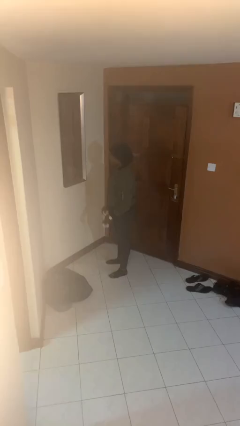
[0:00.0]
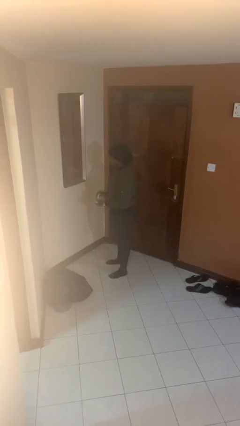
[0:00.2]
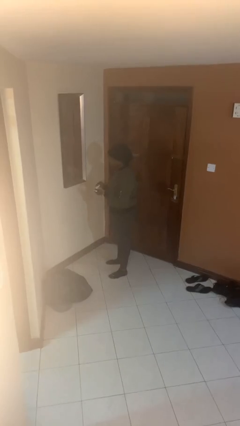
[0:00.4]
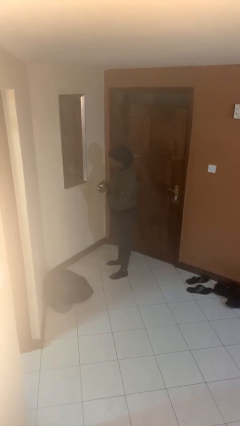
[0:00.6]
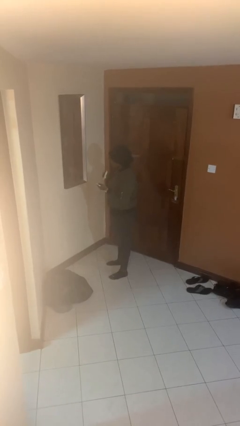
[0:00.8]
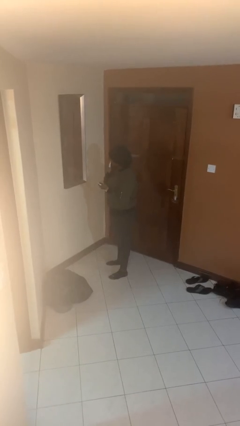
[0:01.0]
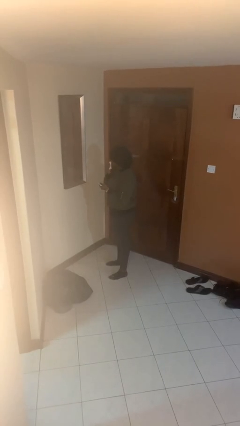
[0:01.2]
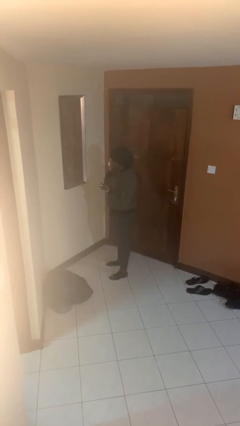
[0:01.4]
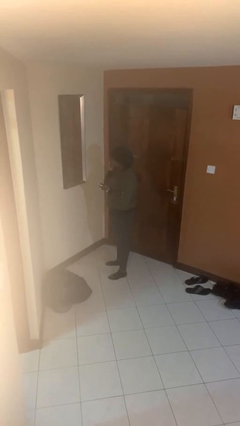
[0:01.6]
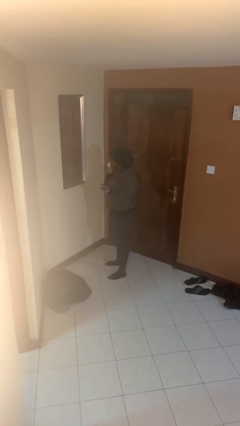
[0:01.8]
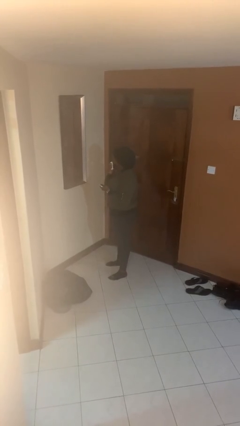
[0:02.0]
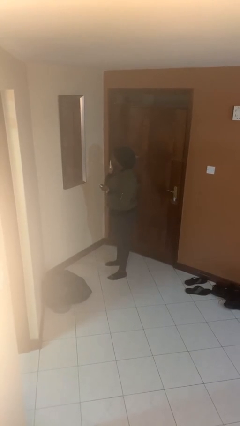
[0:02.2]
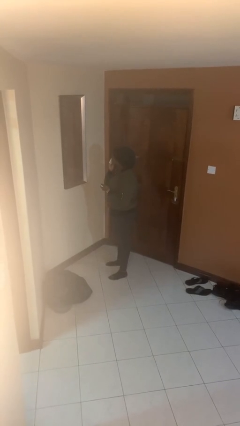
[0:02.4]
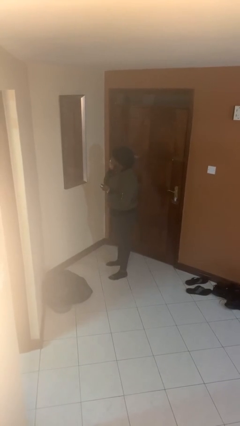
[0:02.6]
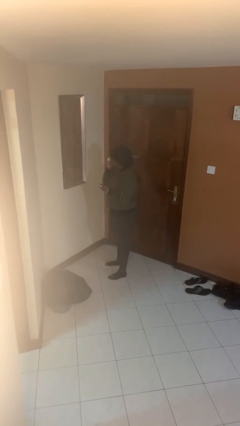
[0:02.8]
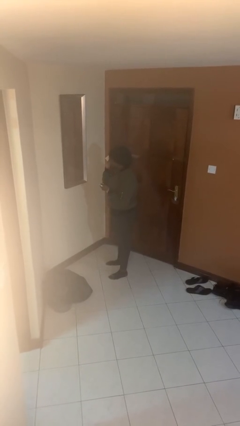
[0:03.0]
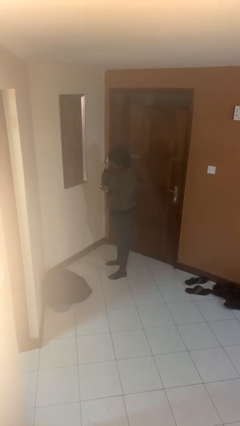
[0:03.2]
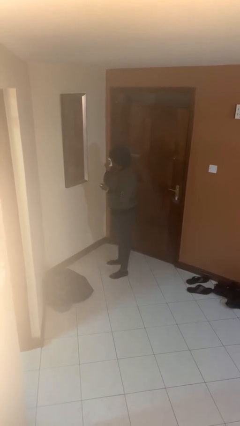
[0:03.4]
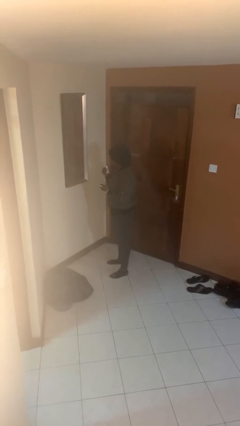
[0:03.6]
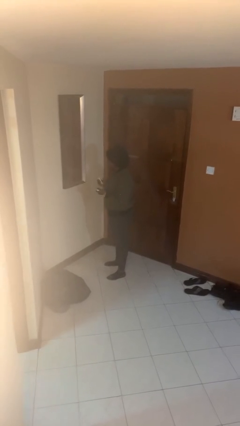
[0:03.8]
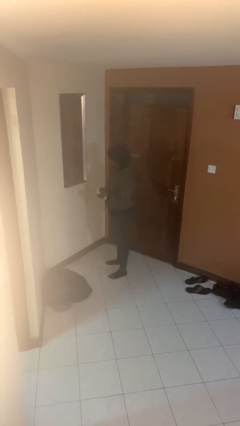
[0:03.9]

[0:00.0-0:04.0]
person applies foundation makeup

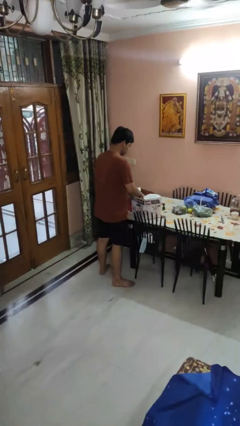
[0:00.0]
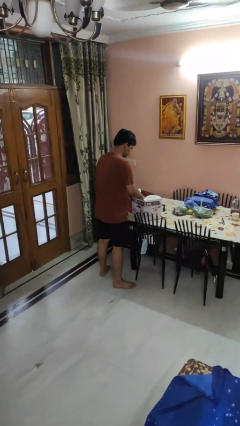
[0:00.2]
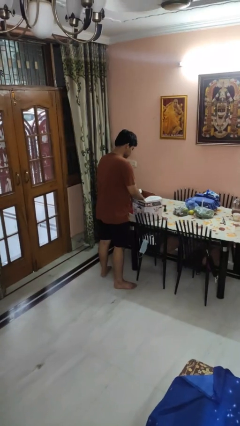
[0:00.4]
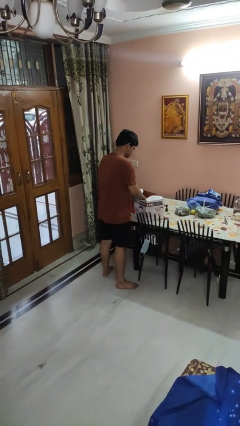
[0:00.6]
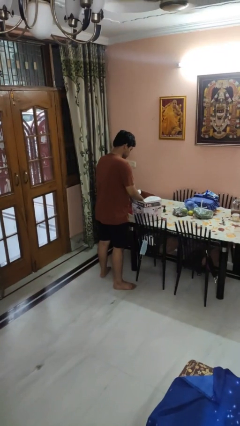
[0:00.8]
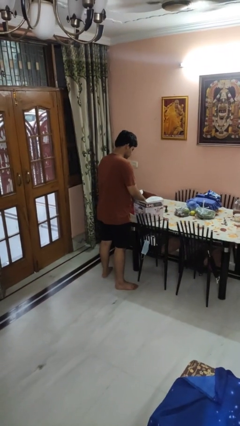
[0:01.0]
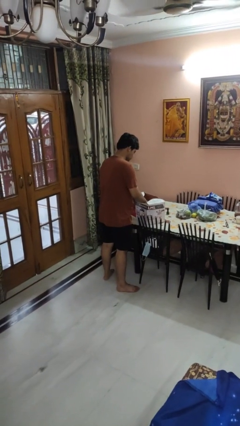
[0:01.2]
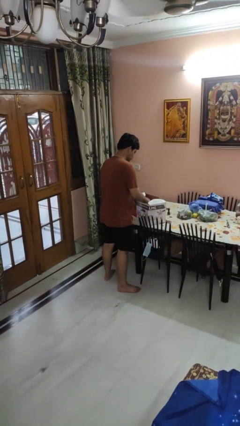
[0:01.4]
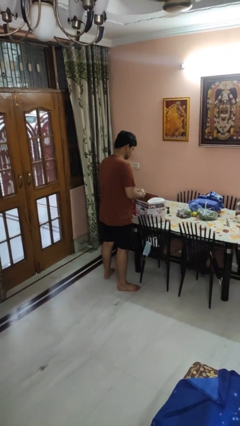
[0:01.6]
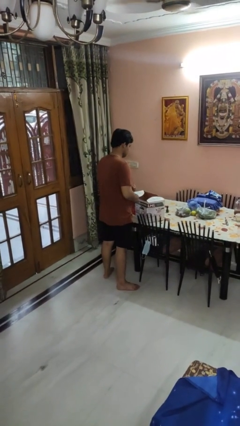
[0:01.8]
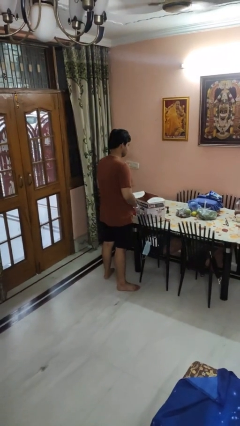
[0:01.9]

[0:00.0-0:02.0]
person searches in box

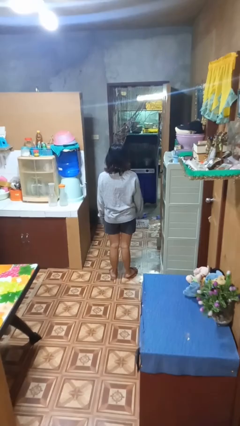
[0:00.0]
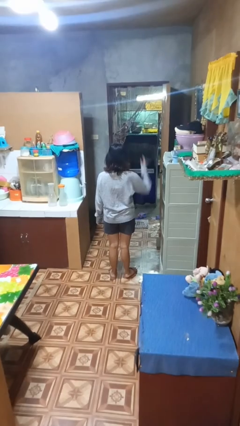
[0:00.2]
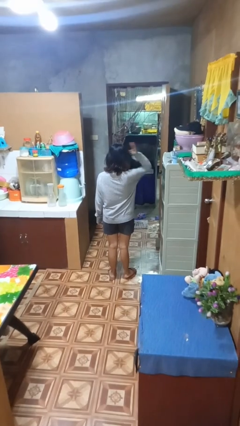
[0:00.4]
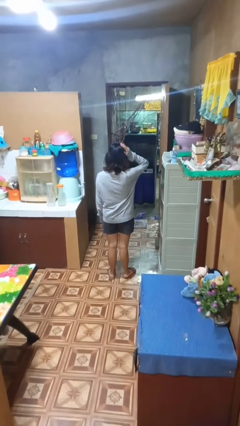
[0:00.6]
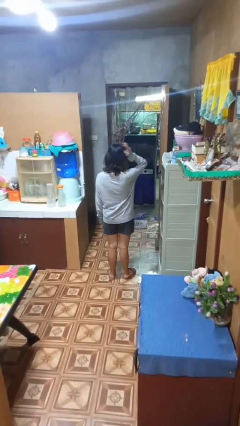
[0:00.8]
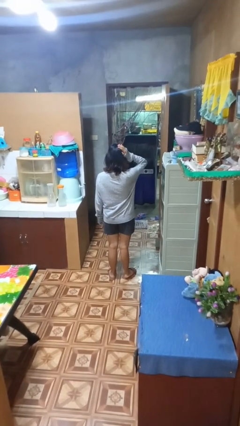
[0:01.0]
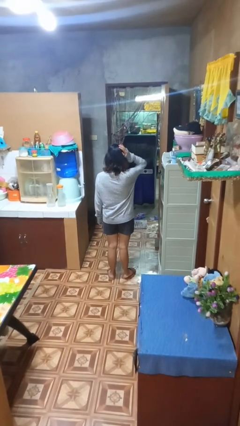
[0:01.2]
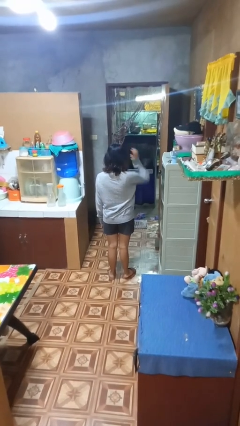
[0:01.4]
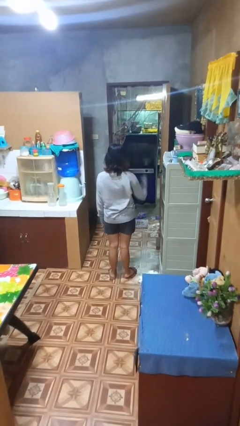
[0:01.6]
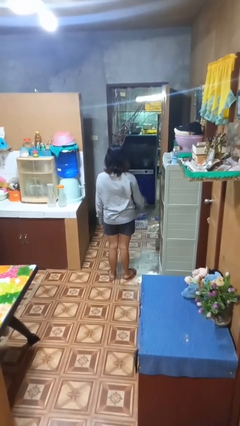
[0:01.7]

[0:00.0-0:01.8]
person pats head

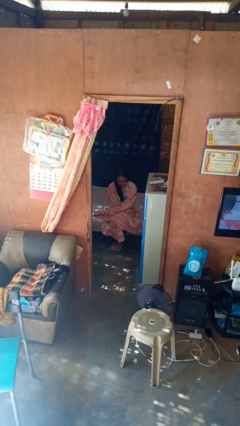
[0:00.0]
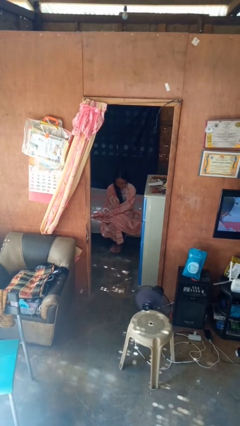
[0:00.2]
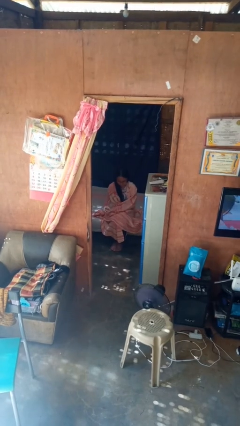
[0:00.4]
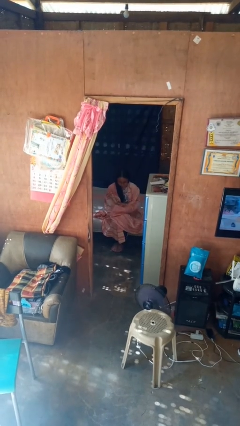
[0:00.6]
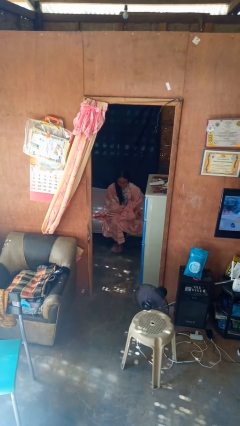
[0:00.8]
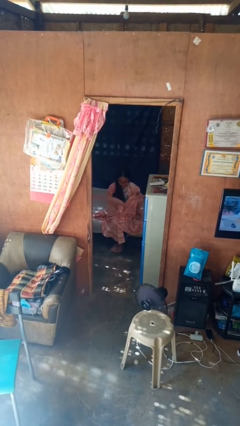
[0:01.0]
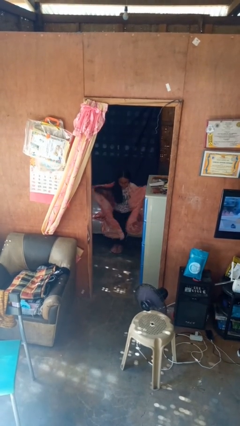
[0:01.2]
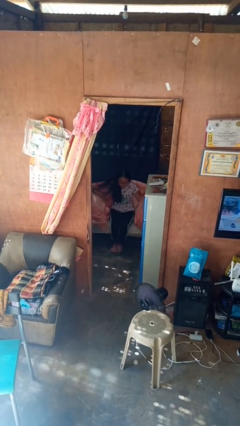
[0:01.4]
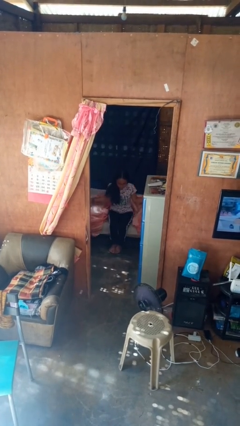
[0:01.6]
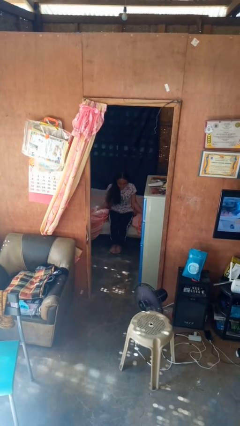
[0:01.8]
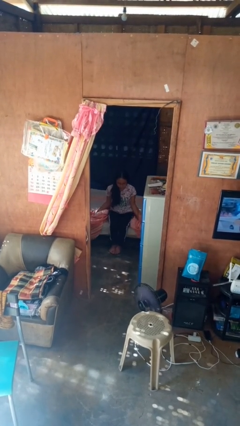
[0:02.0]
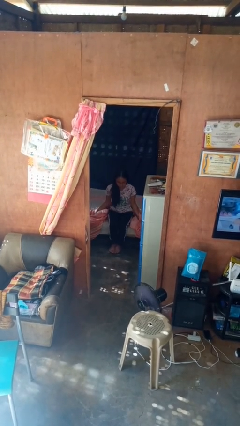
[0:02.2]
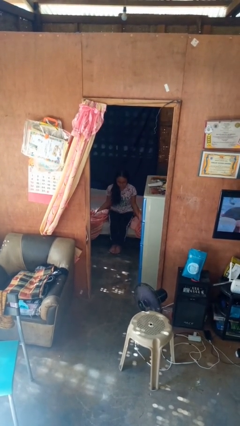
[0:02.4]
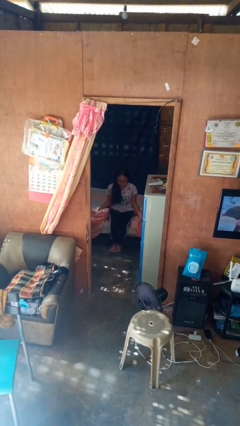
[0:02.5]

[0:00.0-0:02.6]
person uncovers with blanket

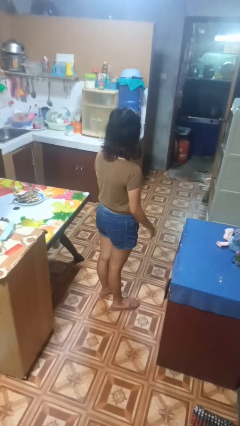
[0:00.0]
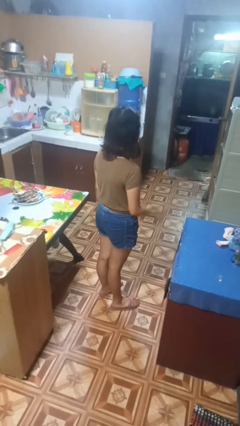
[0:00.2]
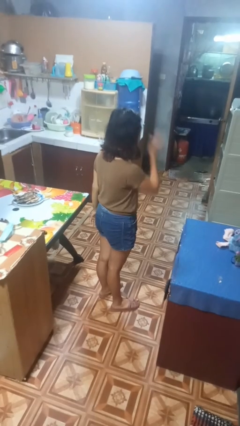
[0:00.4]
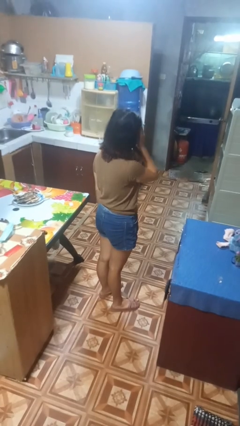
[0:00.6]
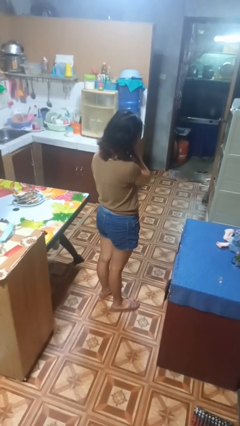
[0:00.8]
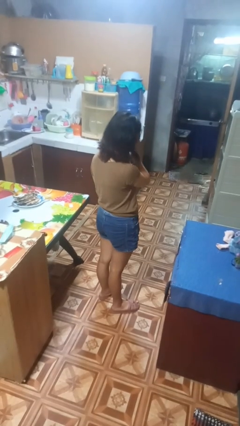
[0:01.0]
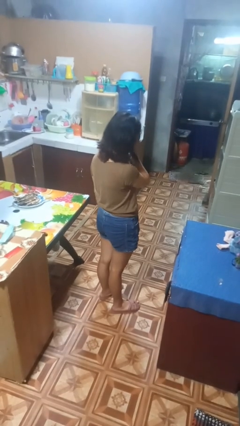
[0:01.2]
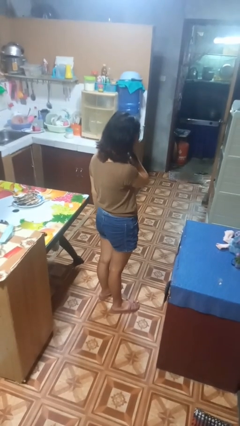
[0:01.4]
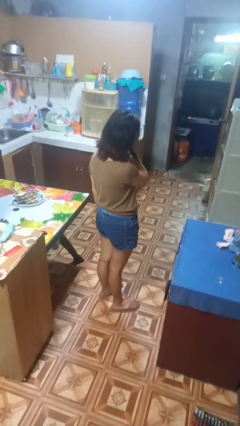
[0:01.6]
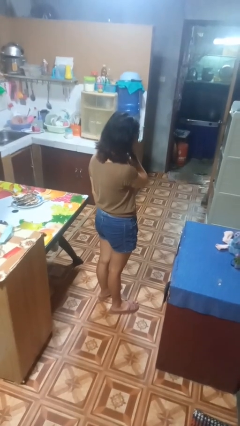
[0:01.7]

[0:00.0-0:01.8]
person covers face with hands

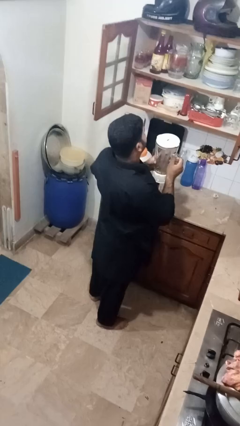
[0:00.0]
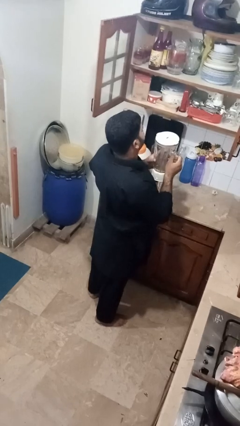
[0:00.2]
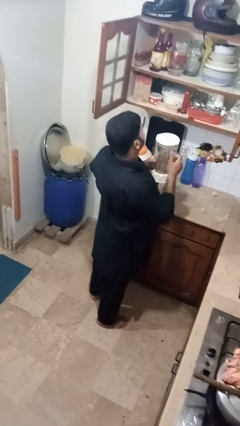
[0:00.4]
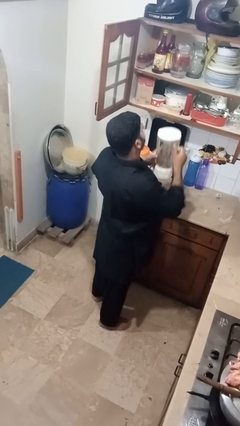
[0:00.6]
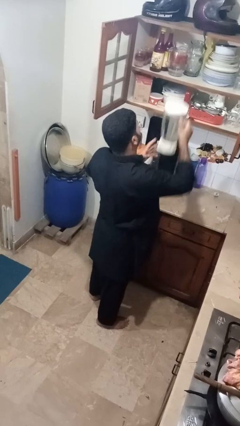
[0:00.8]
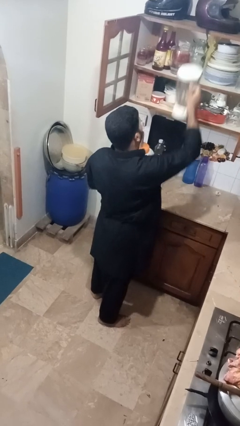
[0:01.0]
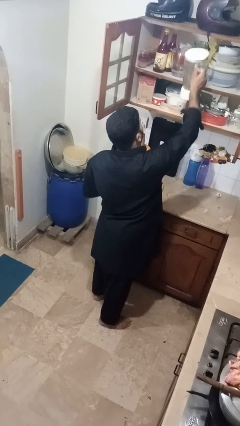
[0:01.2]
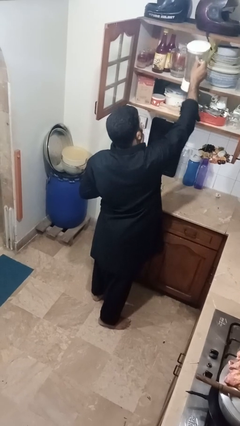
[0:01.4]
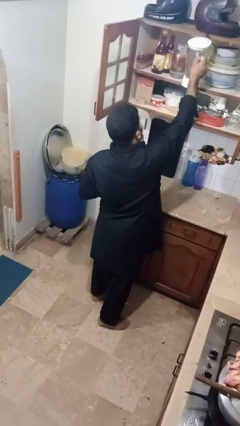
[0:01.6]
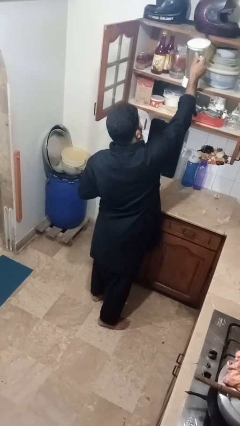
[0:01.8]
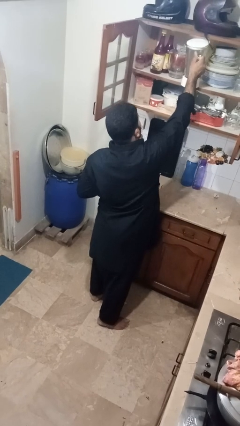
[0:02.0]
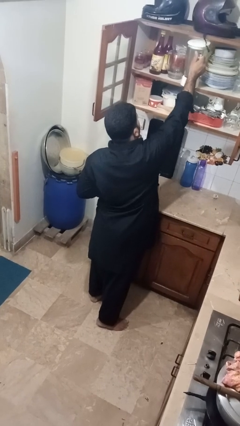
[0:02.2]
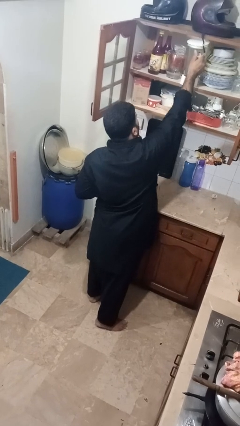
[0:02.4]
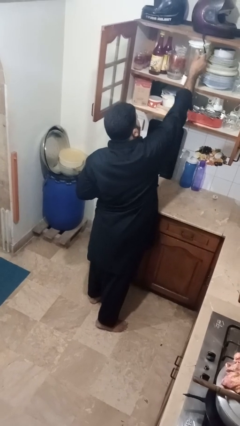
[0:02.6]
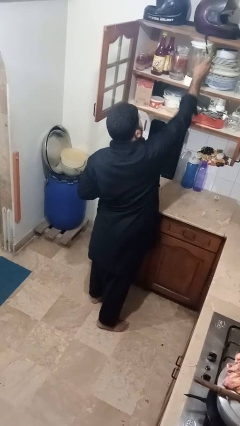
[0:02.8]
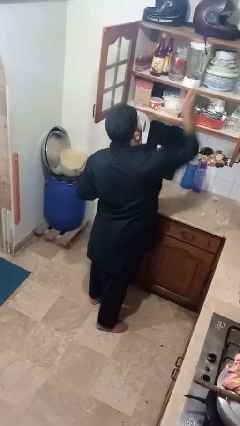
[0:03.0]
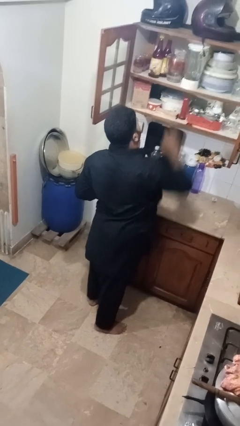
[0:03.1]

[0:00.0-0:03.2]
person puts down object into cabinet

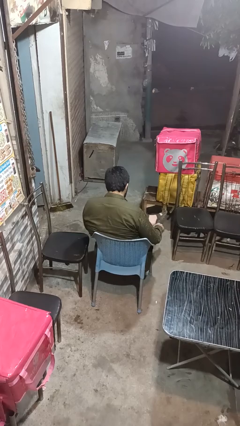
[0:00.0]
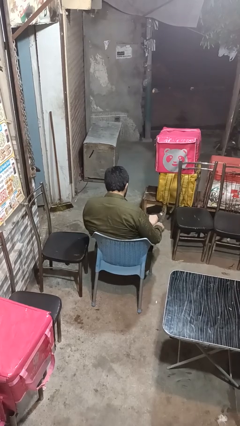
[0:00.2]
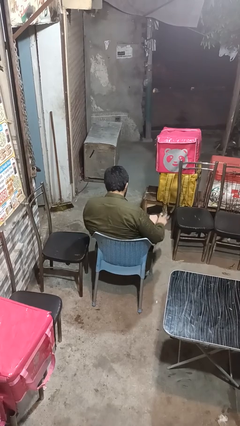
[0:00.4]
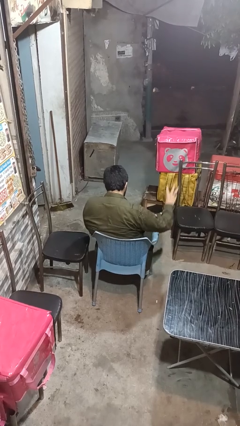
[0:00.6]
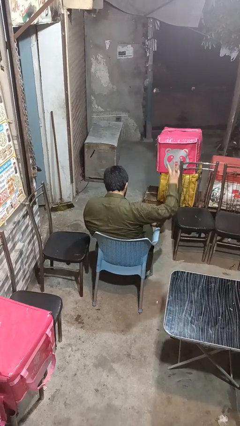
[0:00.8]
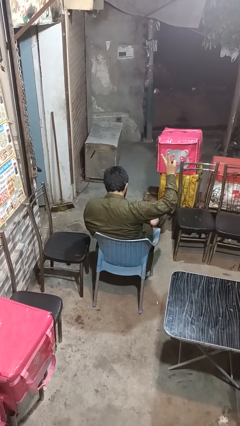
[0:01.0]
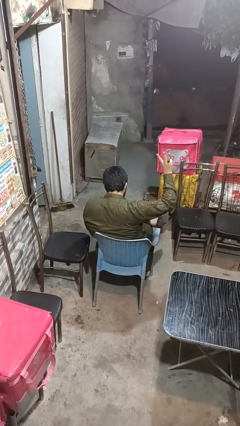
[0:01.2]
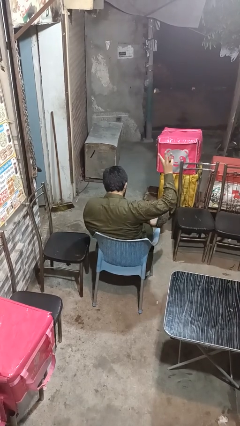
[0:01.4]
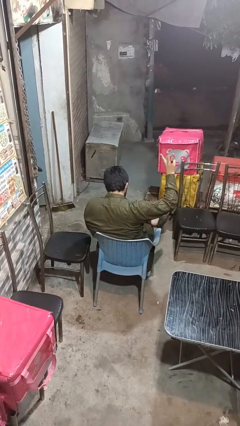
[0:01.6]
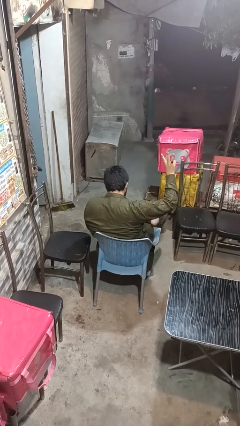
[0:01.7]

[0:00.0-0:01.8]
person gestures number three

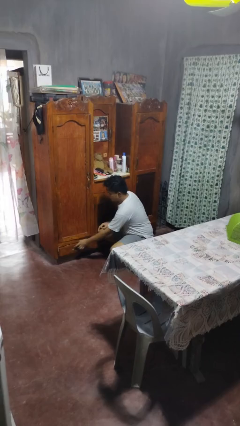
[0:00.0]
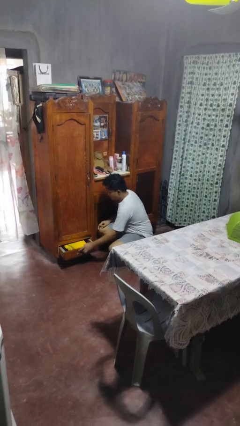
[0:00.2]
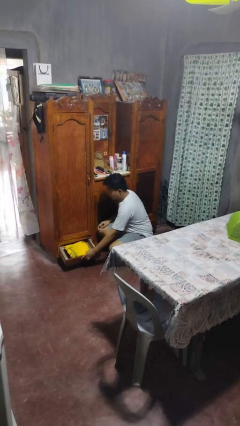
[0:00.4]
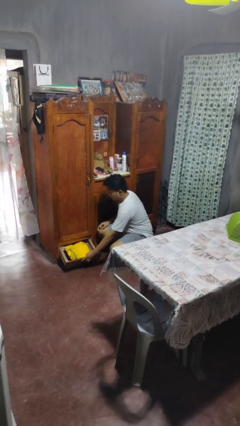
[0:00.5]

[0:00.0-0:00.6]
person opens dresser drawer
